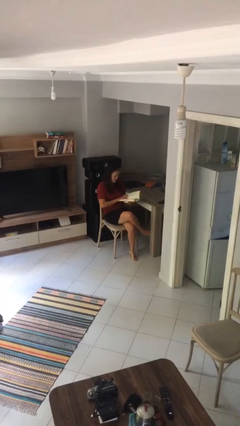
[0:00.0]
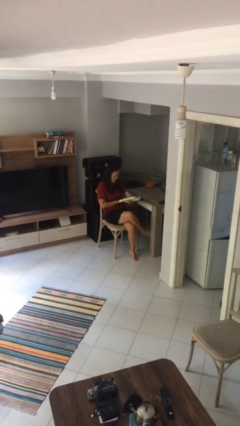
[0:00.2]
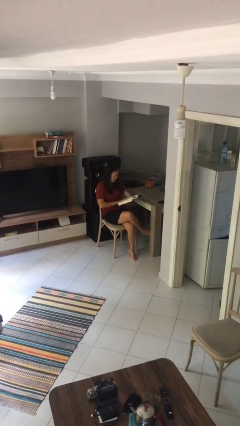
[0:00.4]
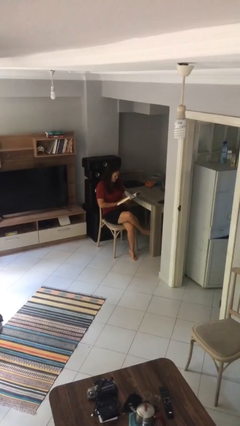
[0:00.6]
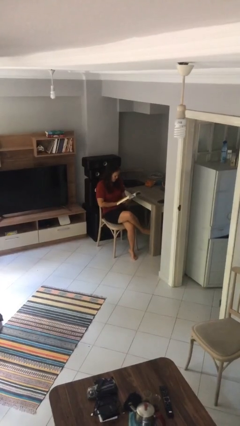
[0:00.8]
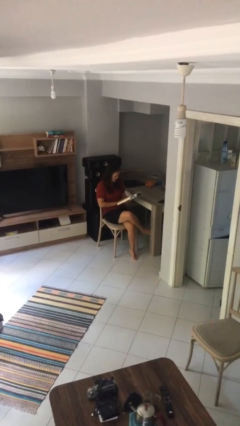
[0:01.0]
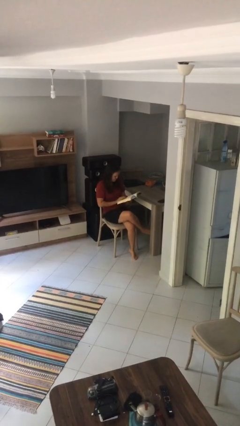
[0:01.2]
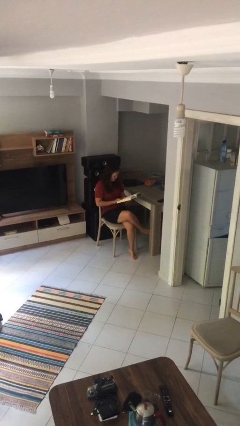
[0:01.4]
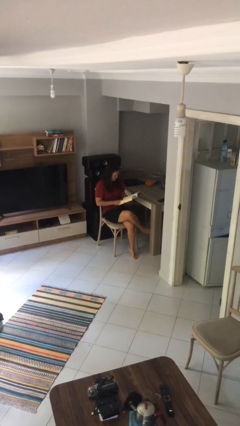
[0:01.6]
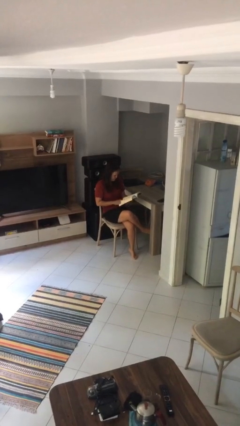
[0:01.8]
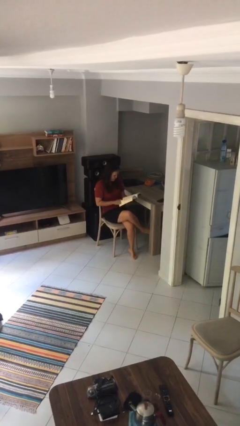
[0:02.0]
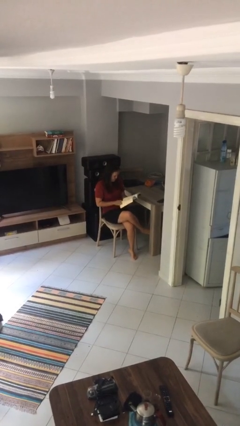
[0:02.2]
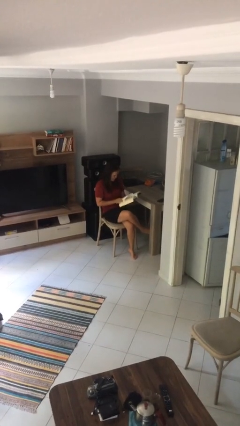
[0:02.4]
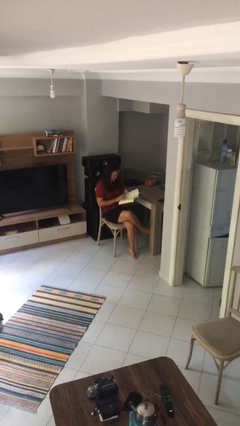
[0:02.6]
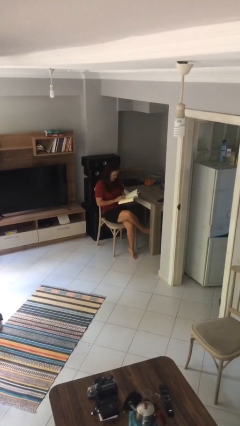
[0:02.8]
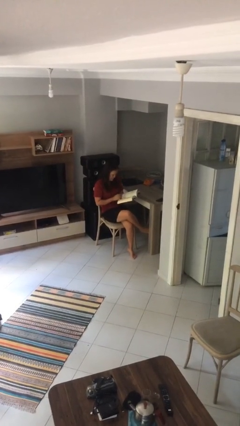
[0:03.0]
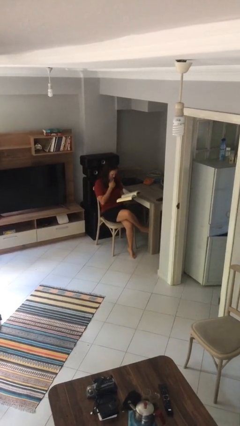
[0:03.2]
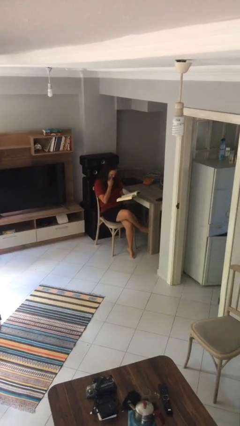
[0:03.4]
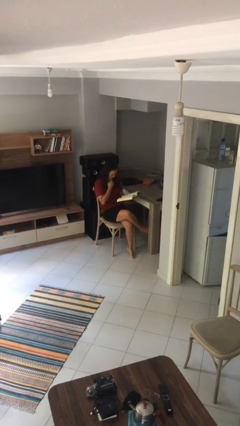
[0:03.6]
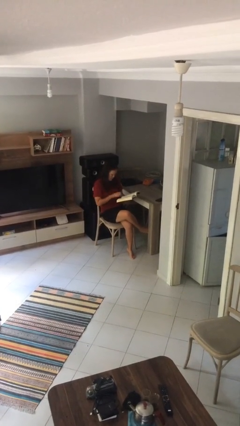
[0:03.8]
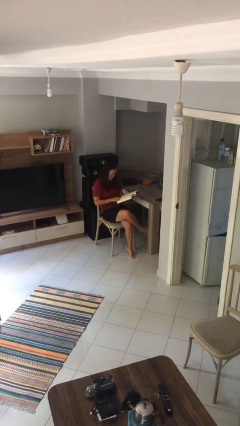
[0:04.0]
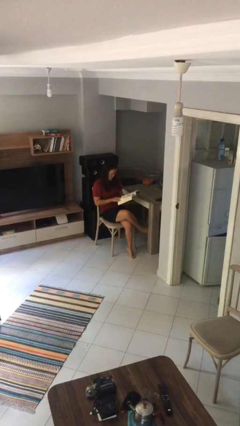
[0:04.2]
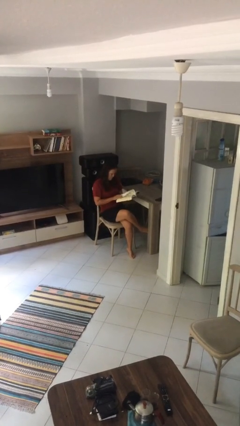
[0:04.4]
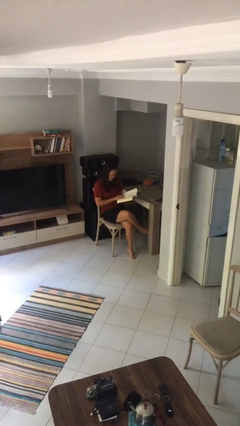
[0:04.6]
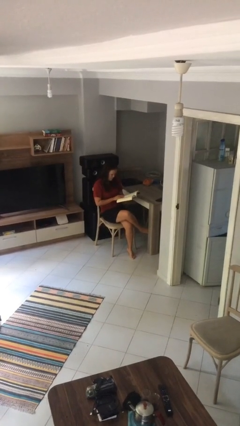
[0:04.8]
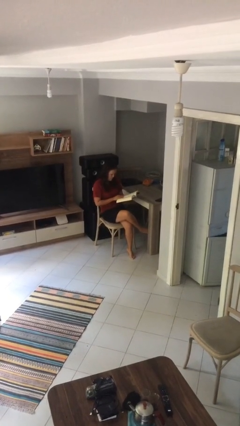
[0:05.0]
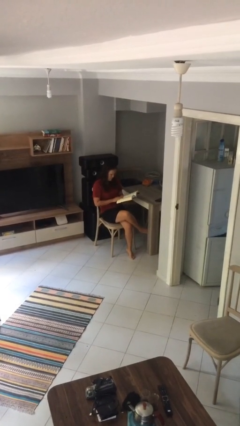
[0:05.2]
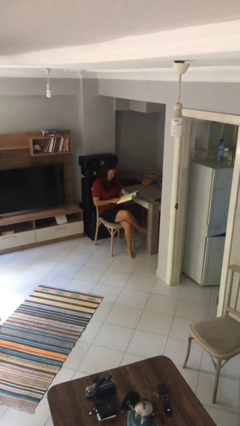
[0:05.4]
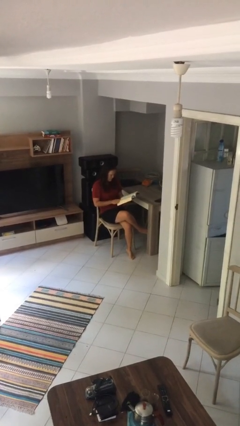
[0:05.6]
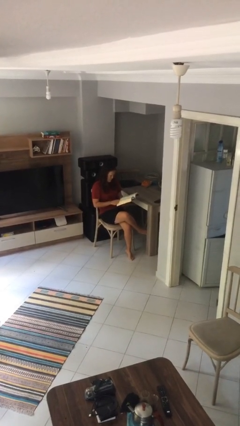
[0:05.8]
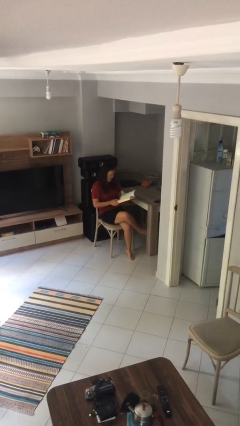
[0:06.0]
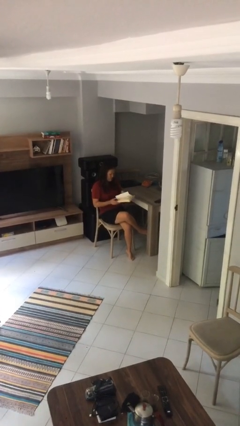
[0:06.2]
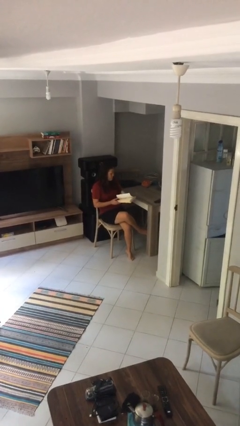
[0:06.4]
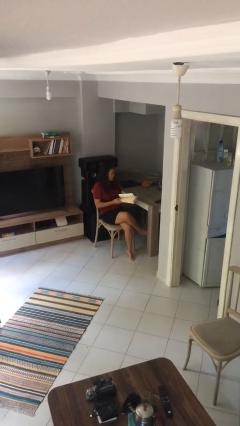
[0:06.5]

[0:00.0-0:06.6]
person reads document

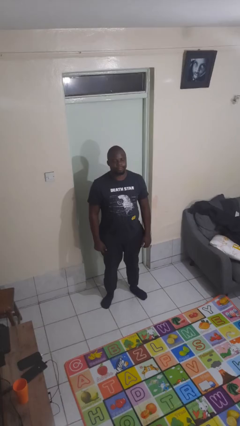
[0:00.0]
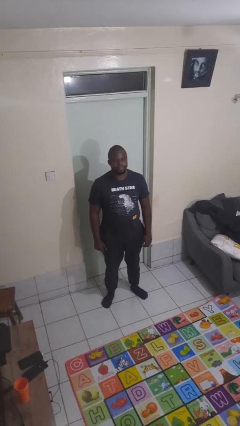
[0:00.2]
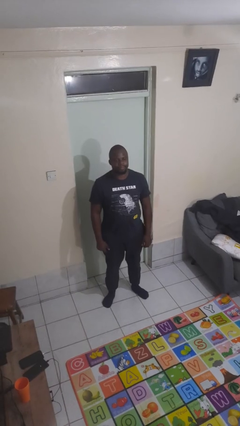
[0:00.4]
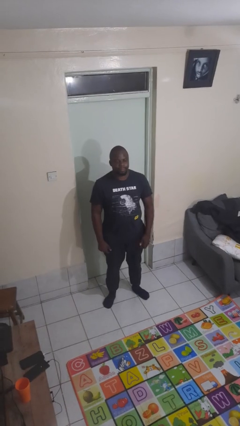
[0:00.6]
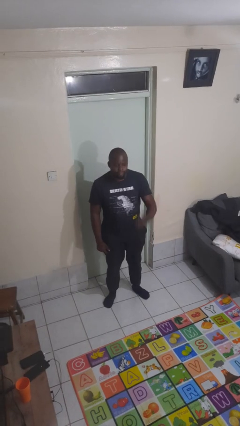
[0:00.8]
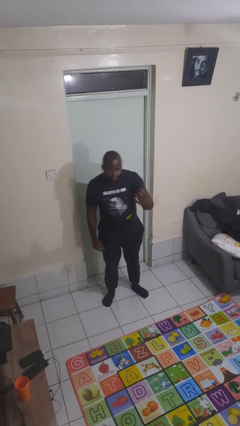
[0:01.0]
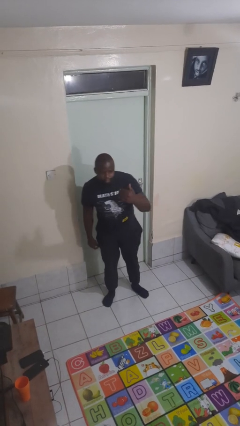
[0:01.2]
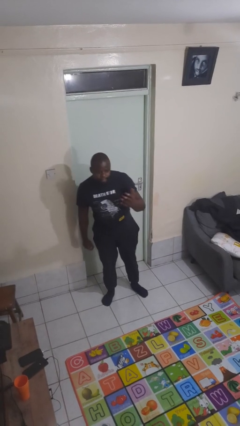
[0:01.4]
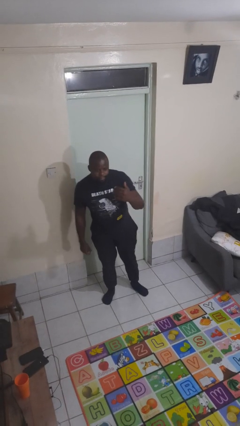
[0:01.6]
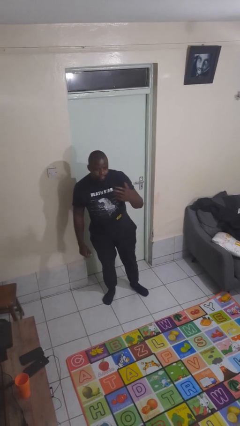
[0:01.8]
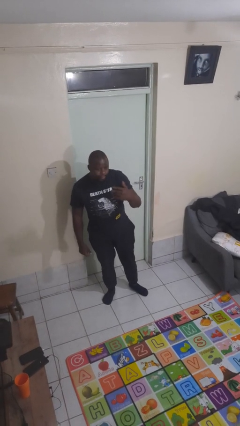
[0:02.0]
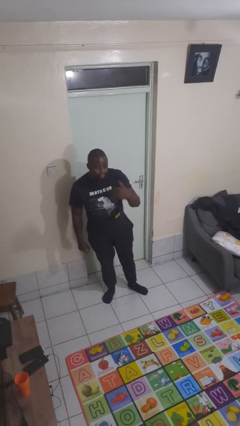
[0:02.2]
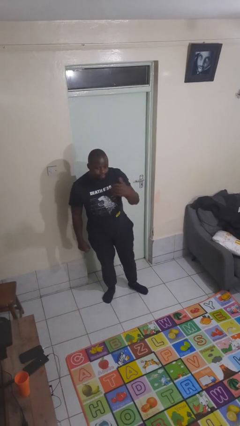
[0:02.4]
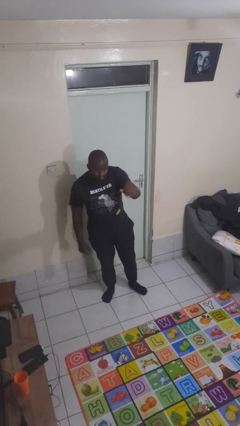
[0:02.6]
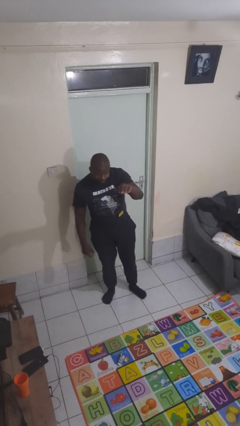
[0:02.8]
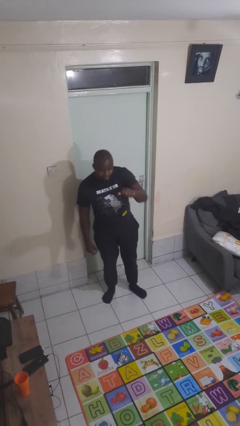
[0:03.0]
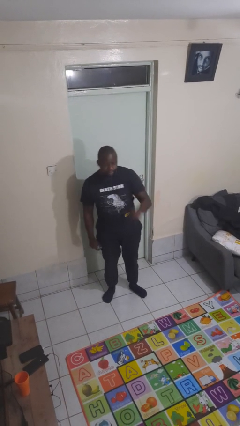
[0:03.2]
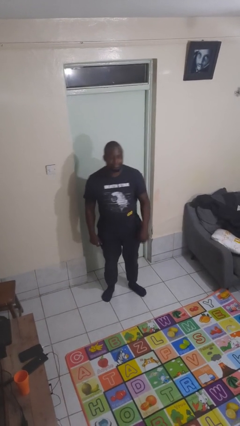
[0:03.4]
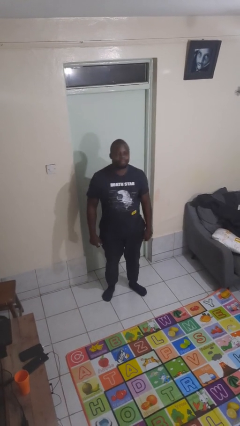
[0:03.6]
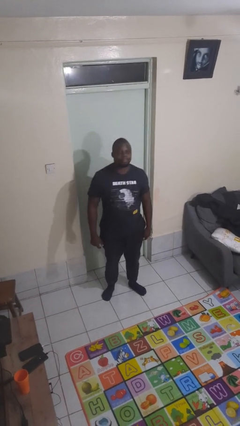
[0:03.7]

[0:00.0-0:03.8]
person gestures come here

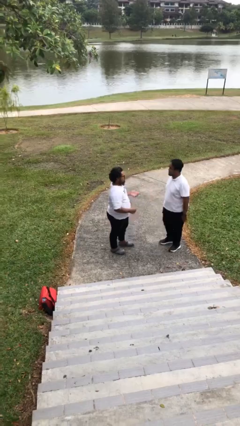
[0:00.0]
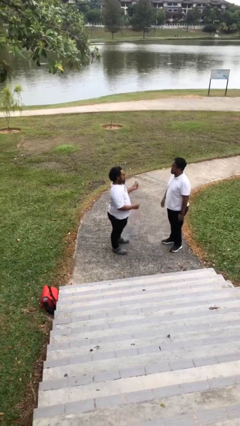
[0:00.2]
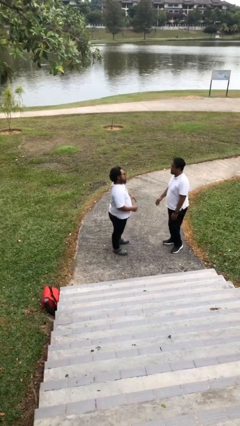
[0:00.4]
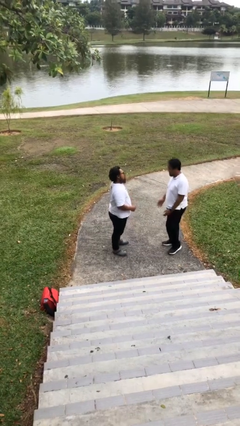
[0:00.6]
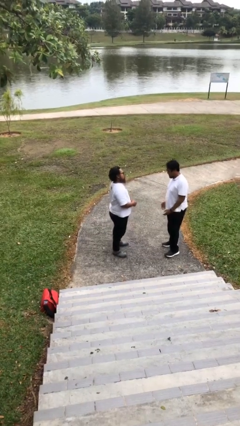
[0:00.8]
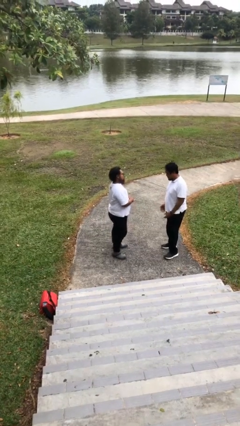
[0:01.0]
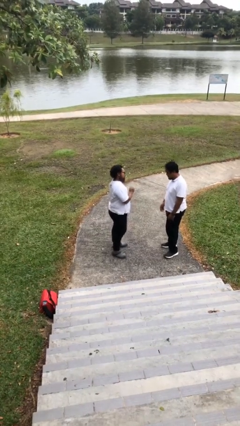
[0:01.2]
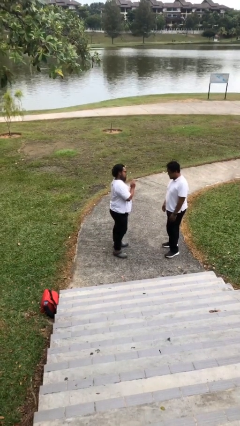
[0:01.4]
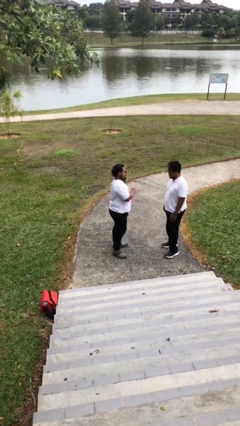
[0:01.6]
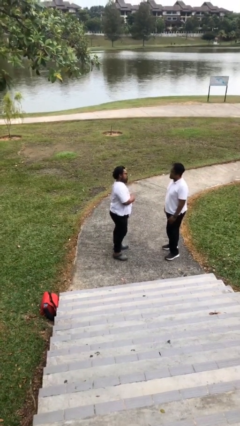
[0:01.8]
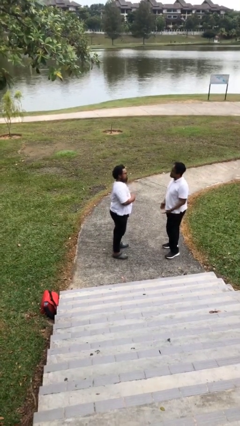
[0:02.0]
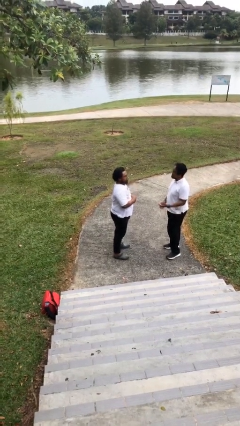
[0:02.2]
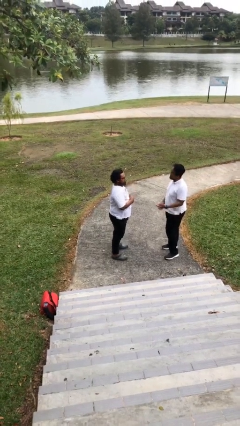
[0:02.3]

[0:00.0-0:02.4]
person talks to person

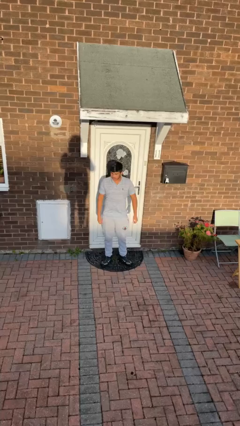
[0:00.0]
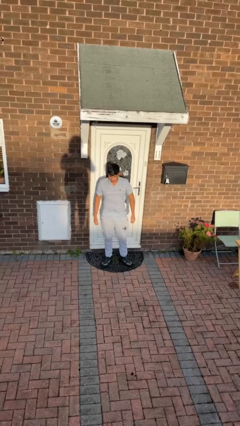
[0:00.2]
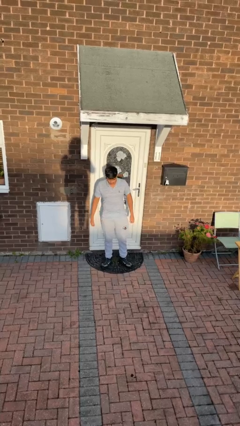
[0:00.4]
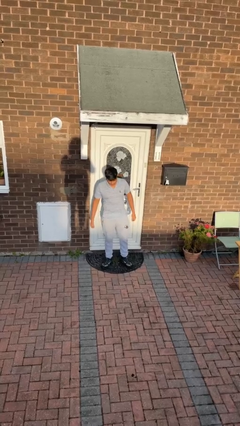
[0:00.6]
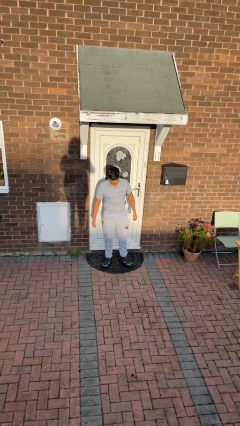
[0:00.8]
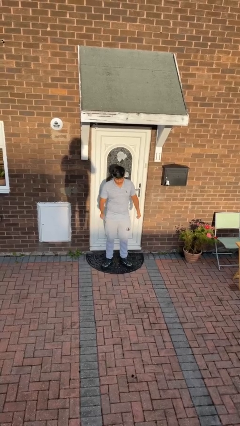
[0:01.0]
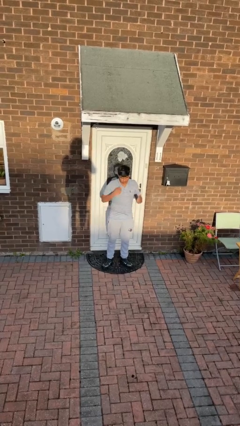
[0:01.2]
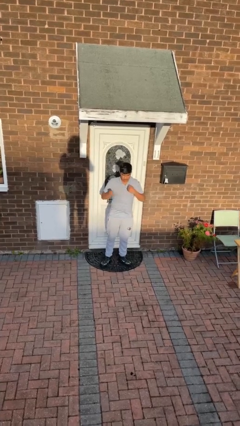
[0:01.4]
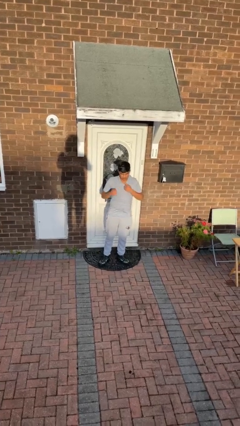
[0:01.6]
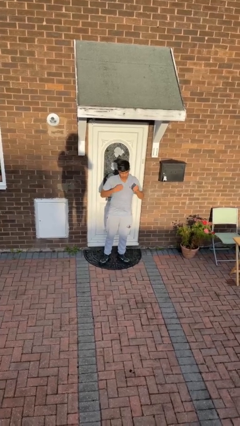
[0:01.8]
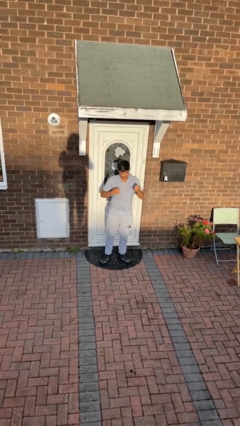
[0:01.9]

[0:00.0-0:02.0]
person drums on chest

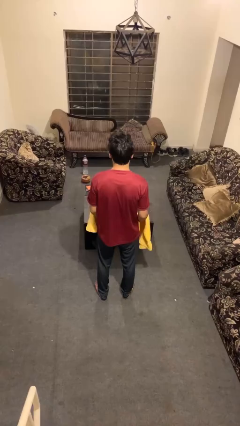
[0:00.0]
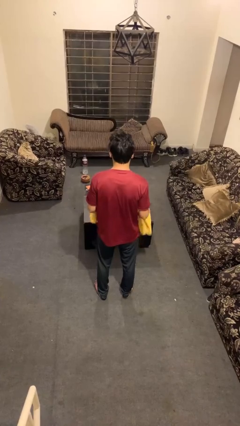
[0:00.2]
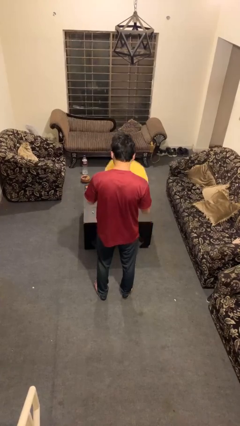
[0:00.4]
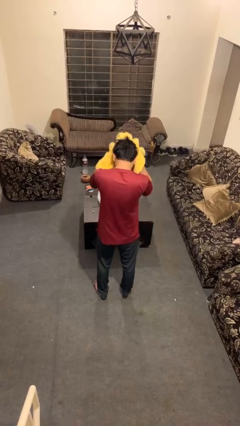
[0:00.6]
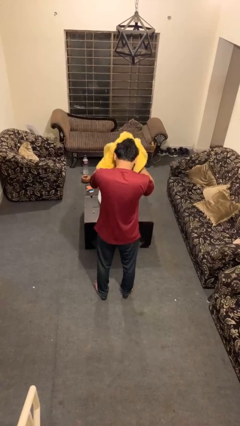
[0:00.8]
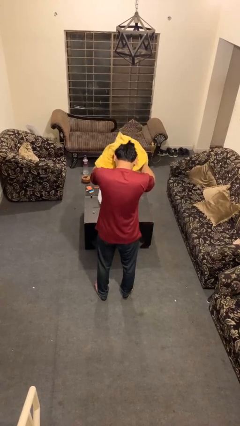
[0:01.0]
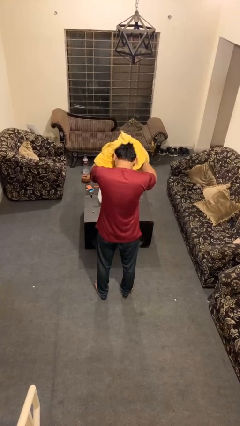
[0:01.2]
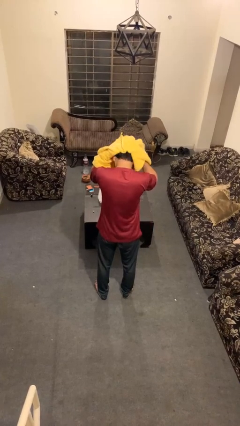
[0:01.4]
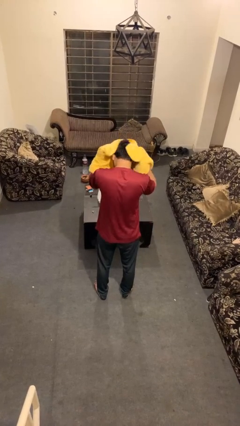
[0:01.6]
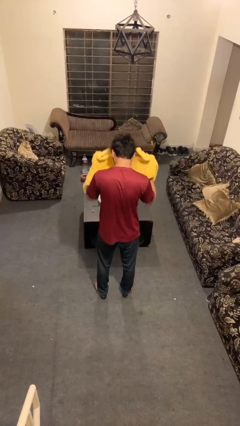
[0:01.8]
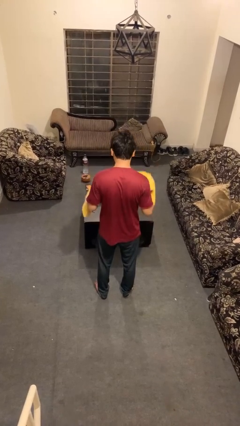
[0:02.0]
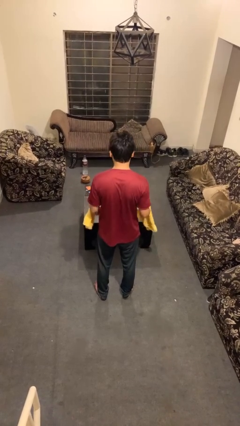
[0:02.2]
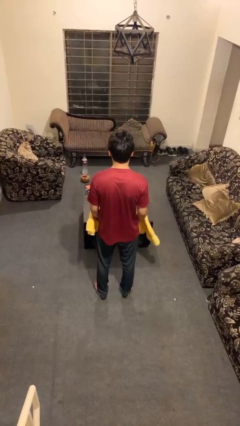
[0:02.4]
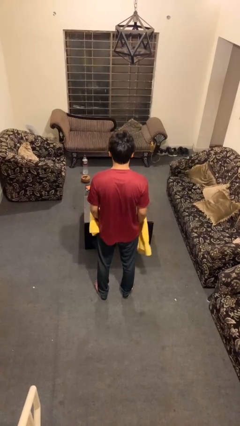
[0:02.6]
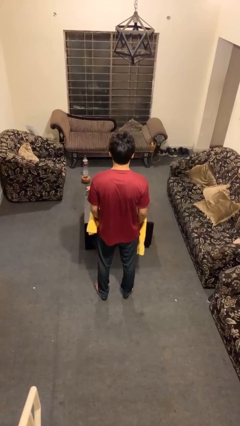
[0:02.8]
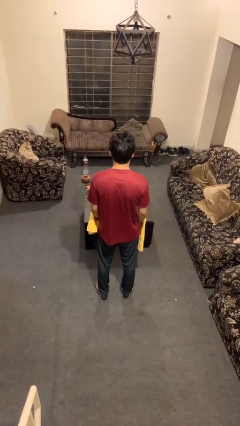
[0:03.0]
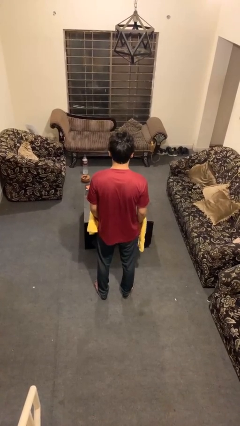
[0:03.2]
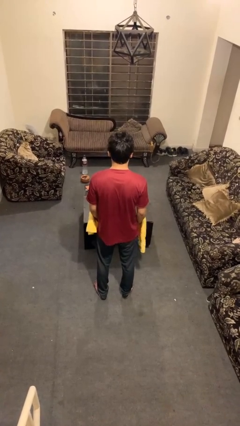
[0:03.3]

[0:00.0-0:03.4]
person dries hair with towel
